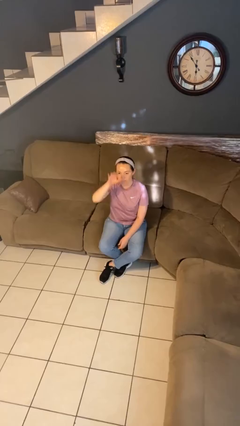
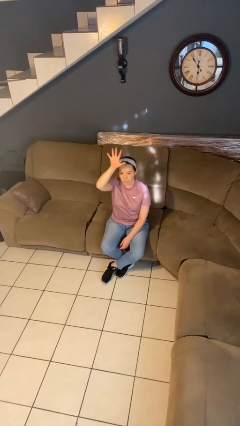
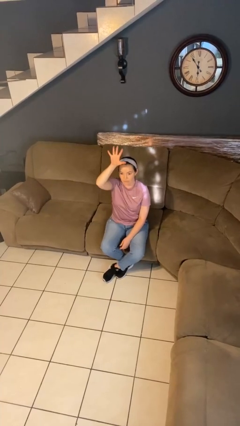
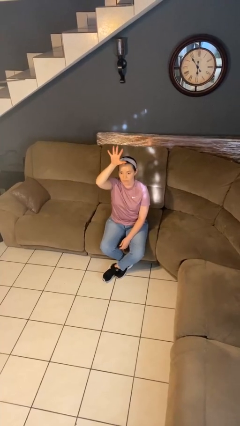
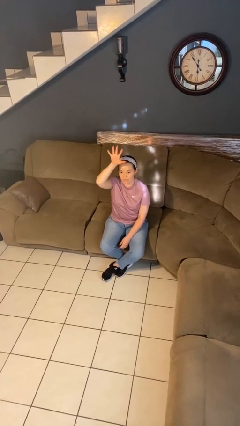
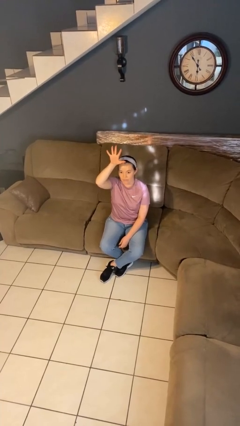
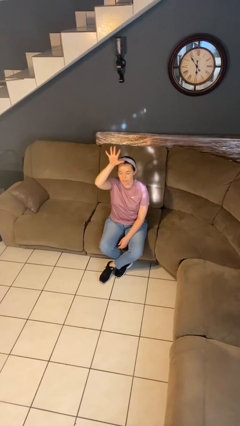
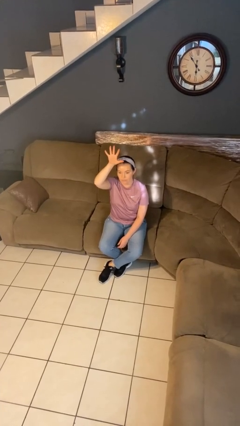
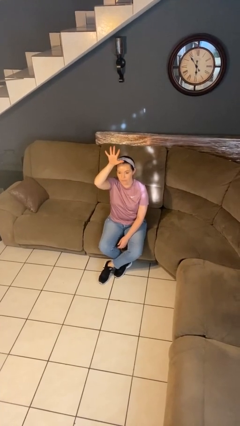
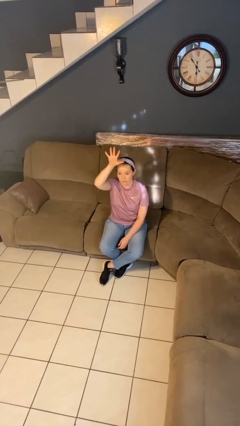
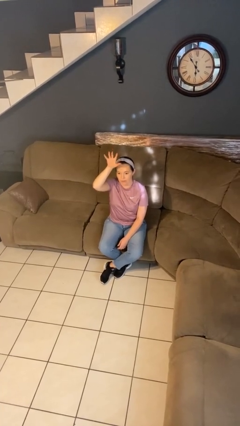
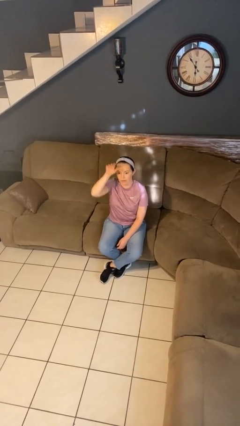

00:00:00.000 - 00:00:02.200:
person gestures number five

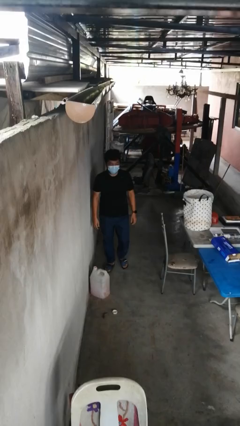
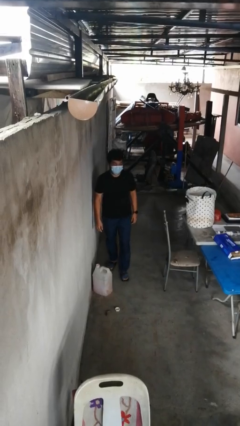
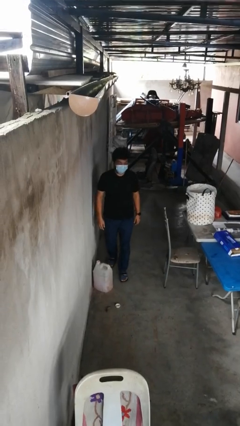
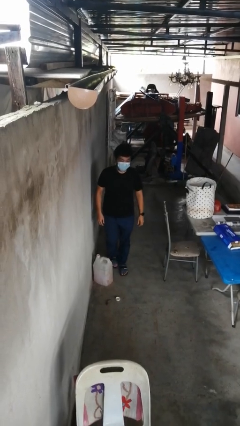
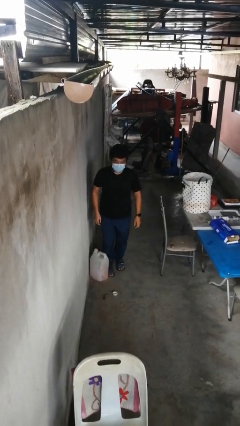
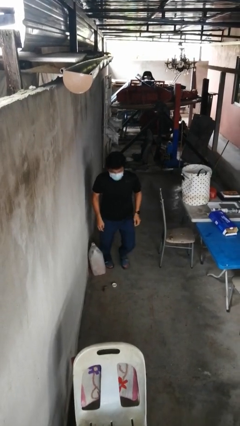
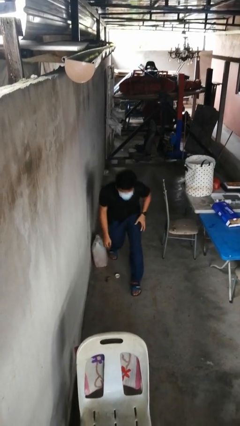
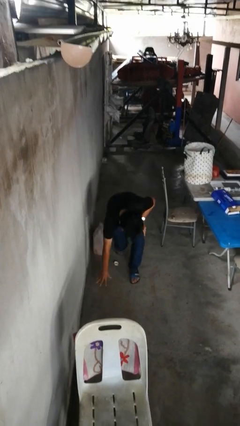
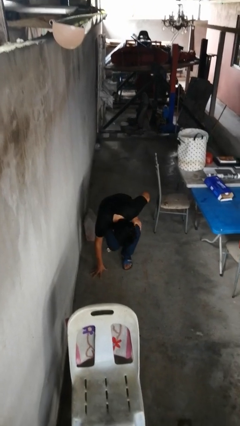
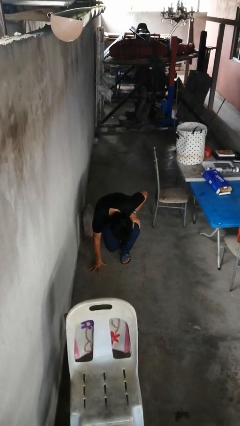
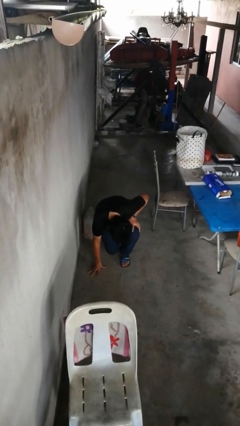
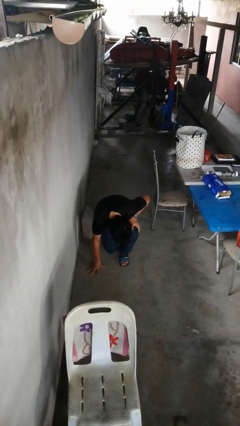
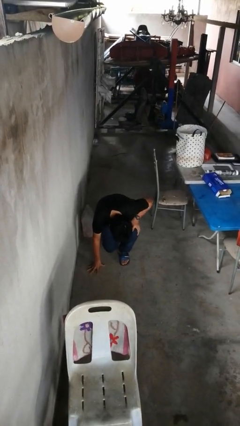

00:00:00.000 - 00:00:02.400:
person trips on object on floor

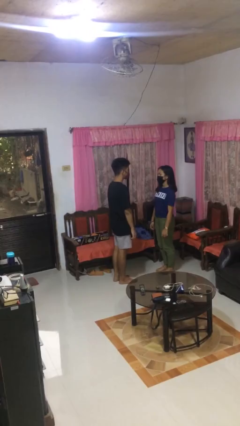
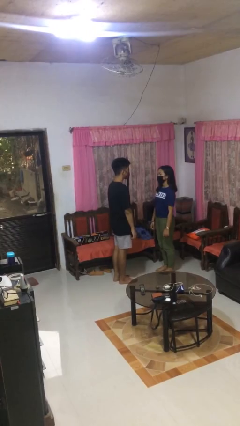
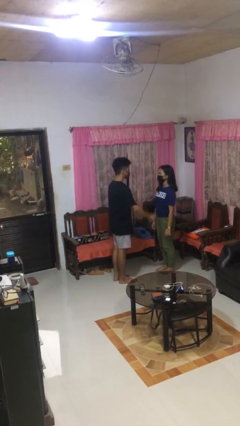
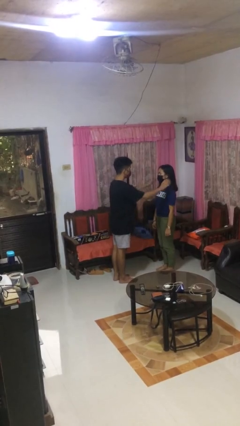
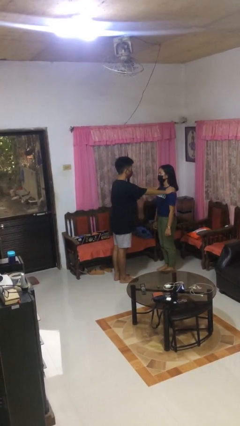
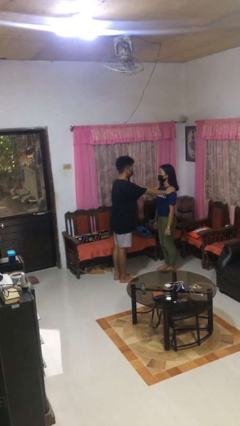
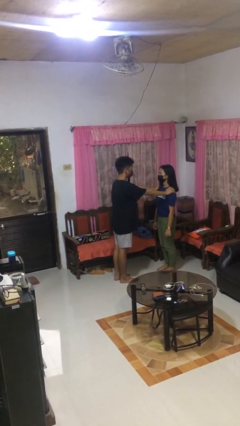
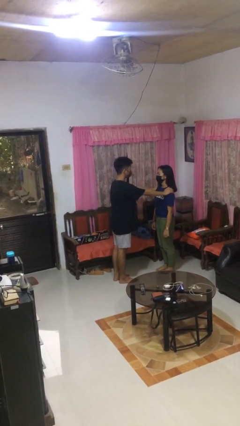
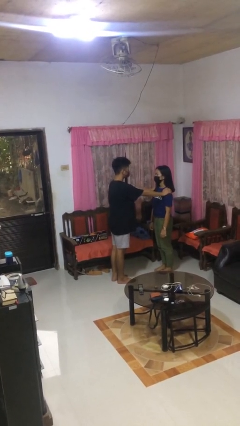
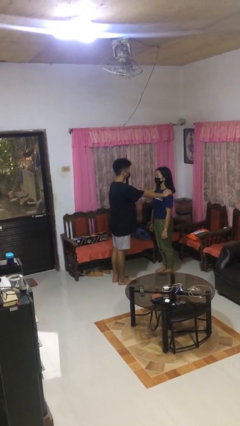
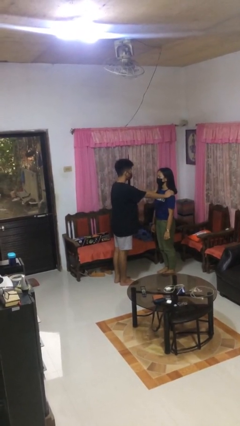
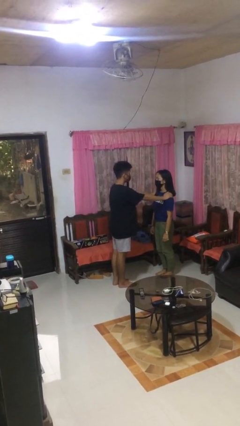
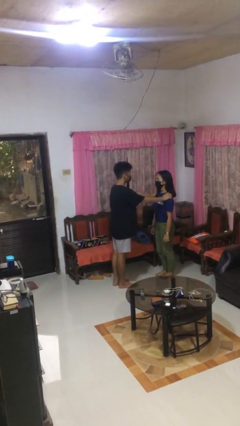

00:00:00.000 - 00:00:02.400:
person grabs person by shoulder

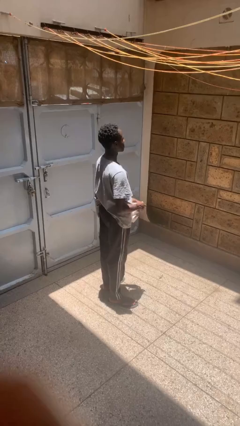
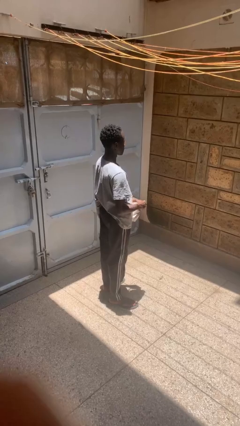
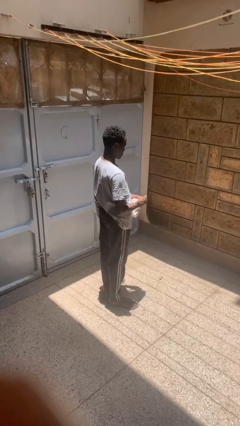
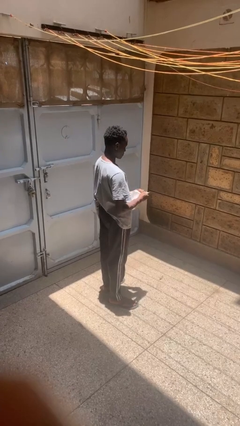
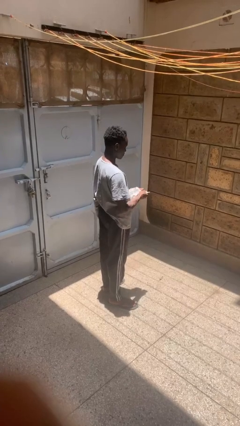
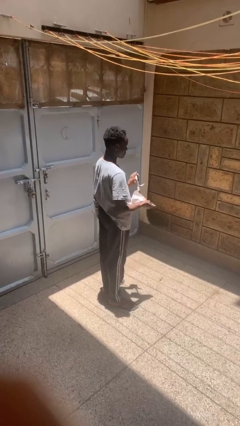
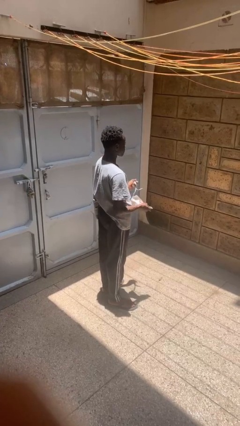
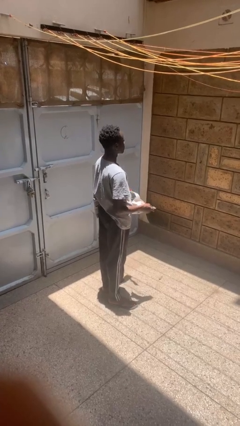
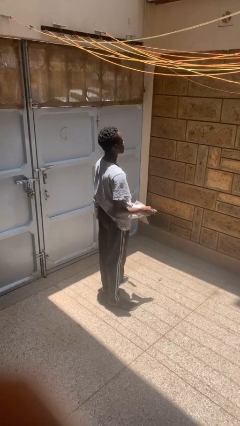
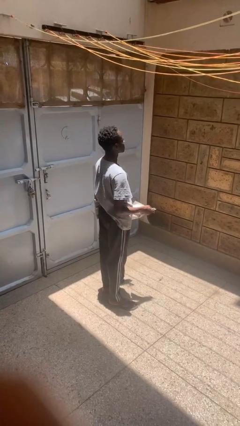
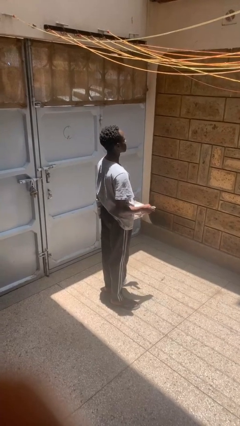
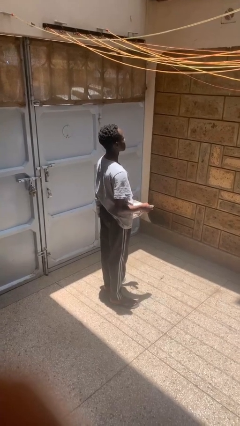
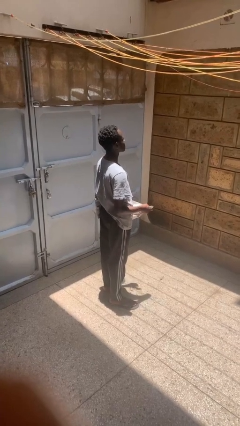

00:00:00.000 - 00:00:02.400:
person tears paper

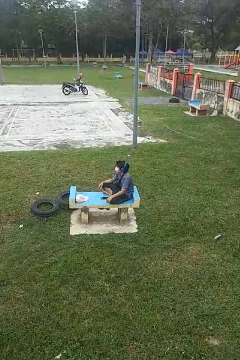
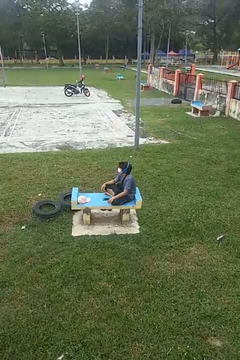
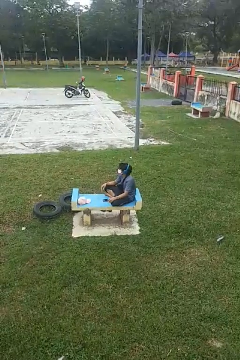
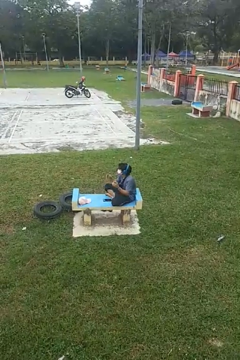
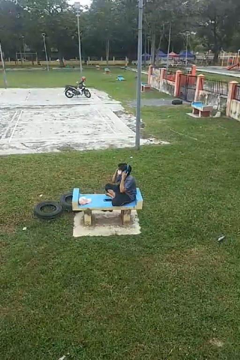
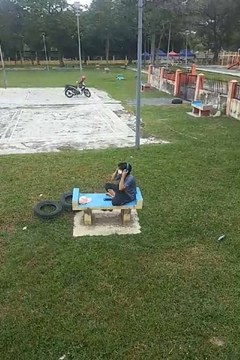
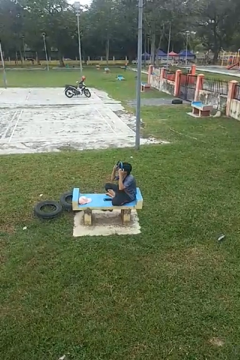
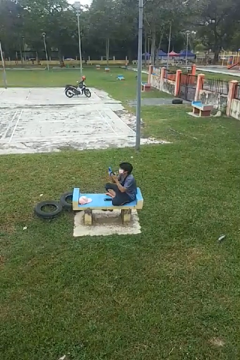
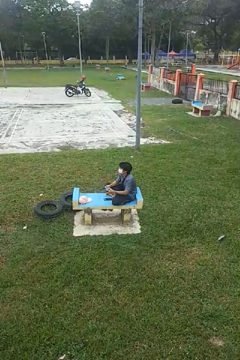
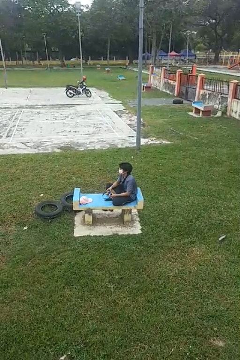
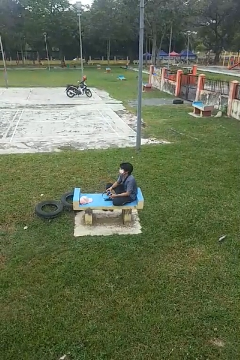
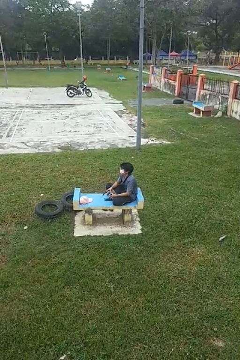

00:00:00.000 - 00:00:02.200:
person takes off headphones

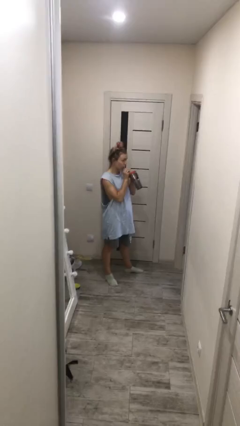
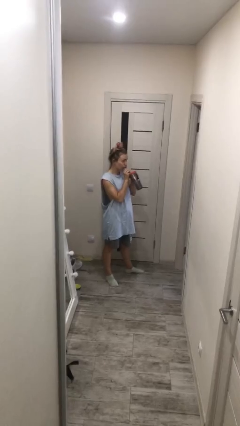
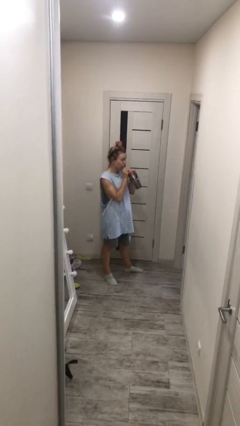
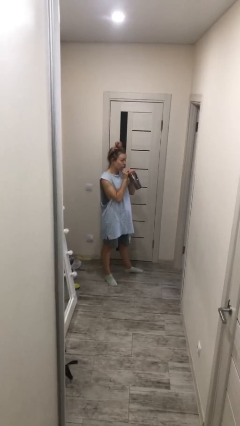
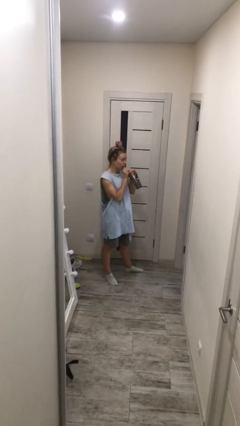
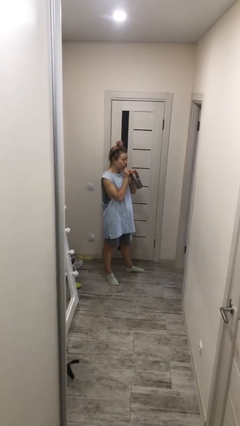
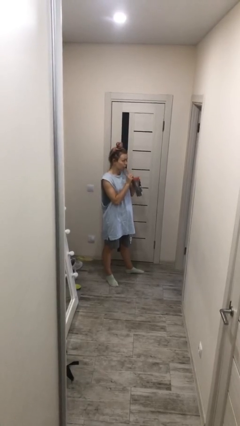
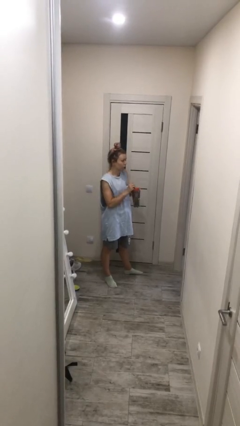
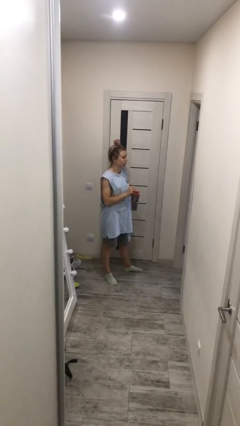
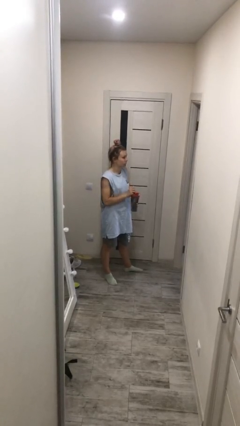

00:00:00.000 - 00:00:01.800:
person drinks from straw

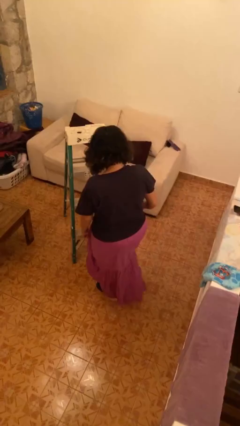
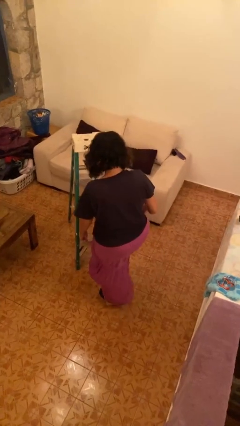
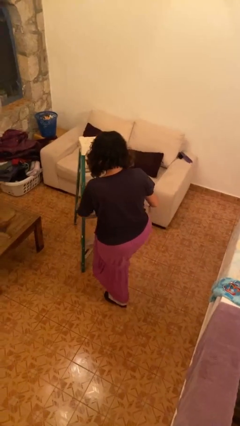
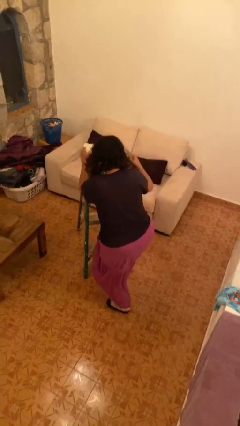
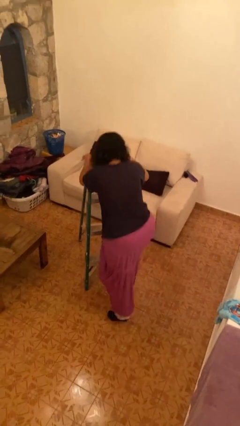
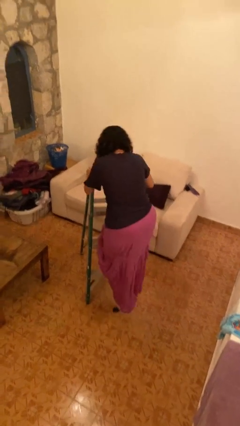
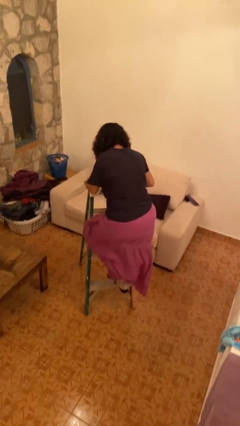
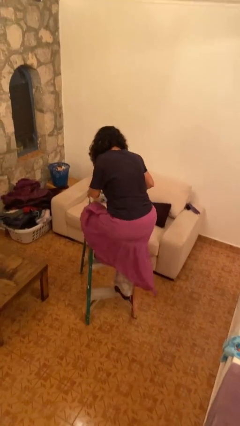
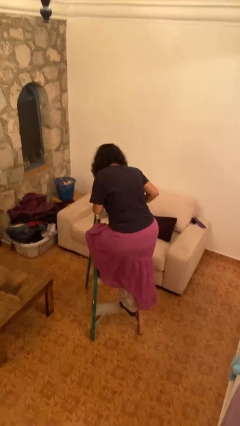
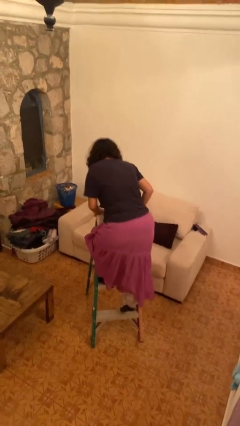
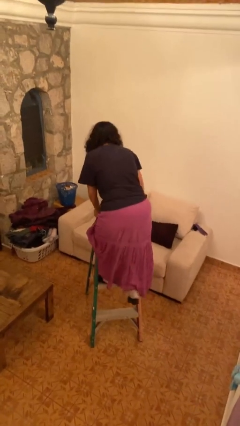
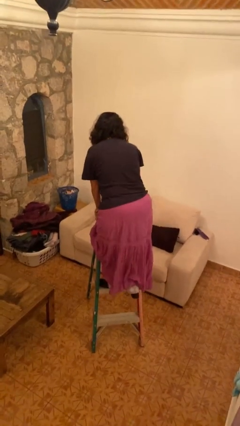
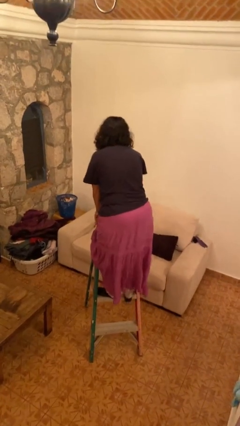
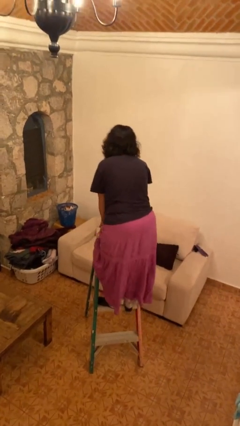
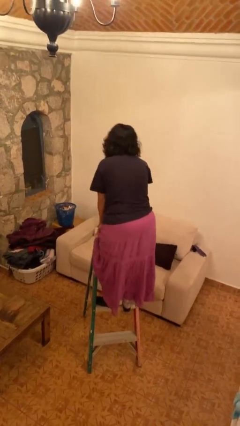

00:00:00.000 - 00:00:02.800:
person climbs up ladder

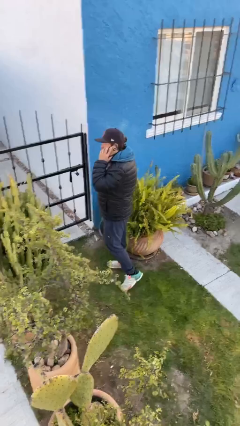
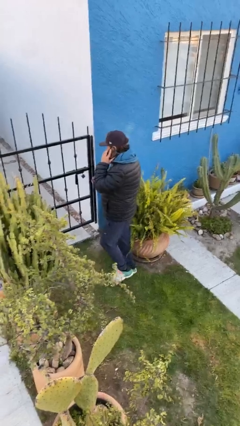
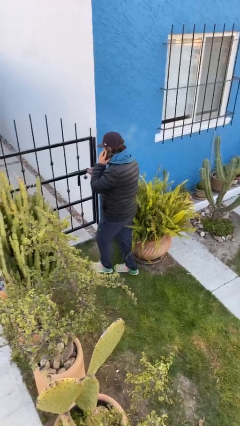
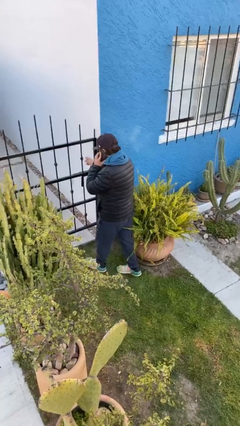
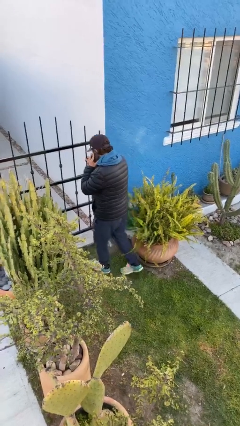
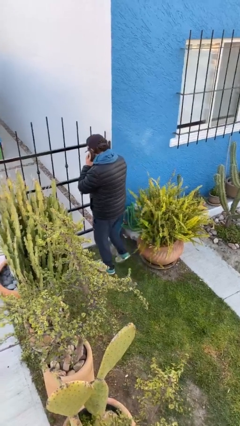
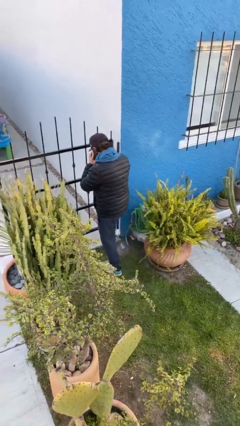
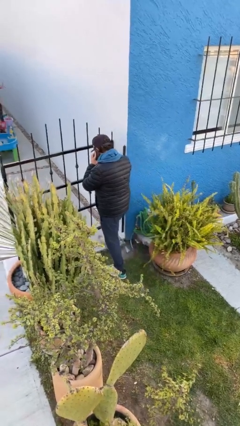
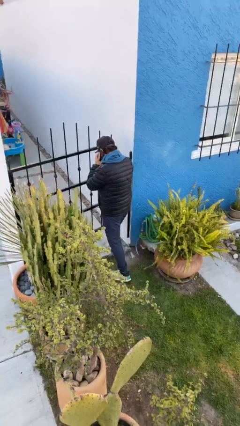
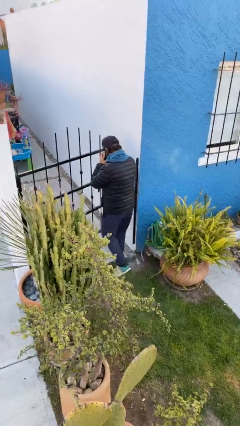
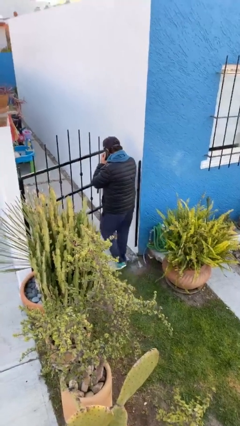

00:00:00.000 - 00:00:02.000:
person opens facility door
